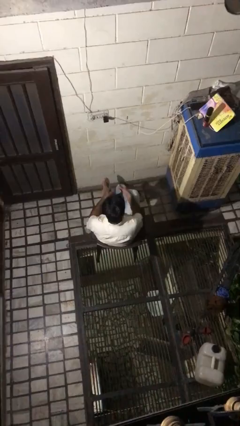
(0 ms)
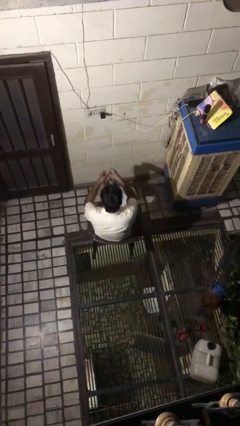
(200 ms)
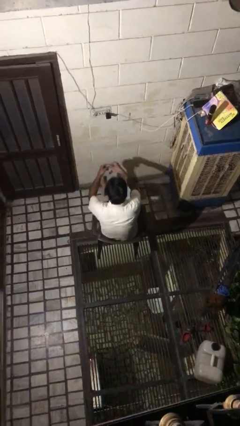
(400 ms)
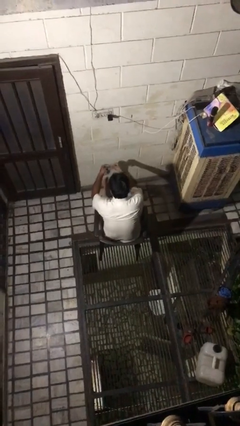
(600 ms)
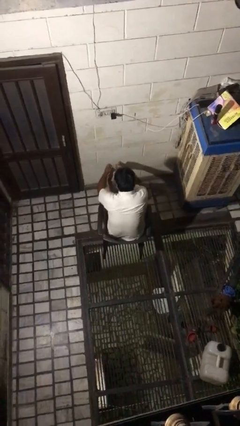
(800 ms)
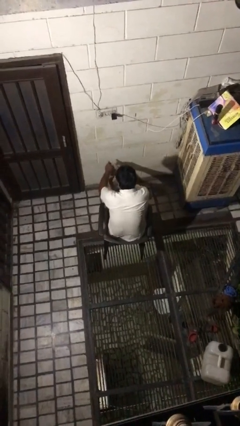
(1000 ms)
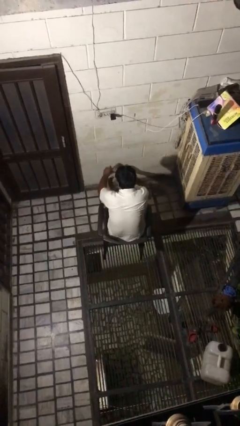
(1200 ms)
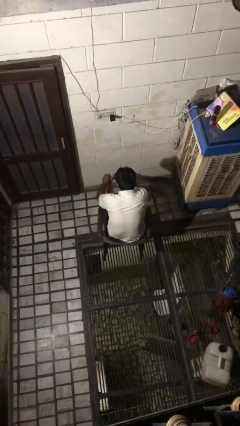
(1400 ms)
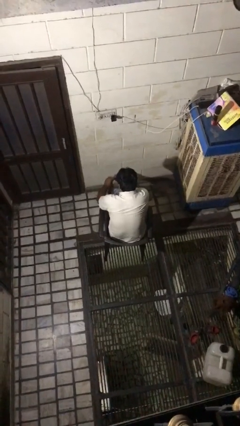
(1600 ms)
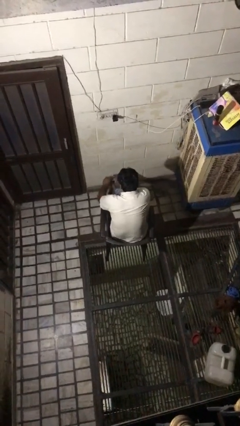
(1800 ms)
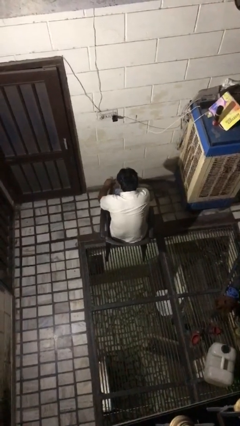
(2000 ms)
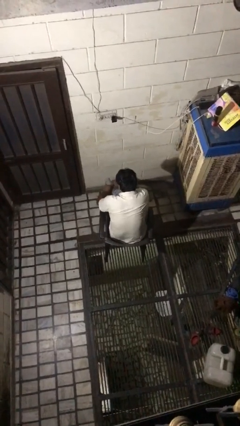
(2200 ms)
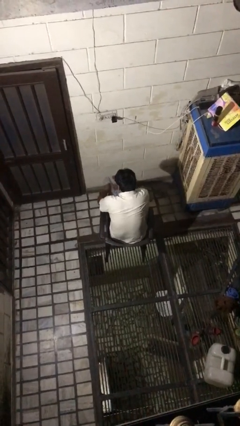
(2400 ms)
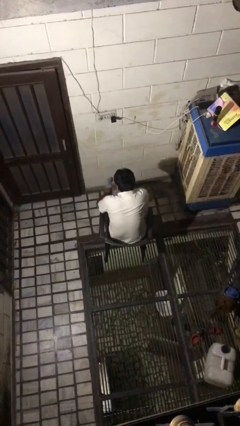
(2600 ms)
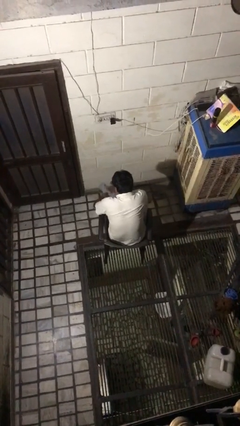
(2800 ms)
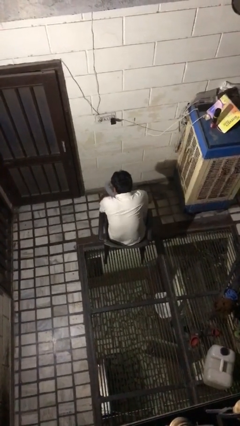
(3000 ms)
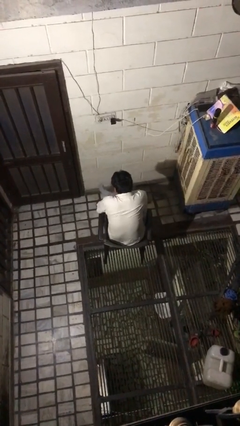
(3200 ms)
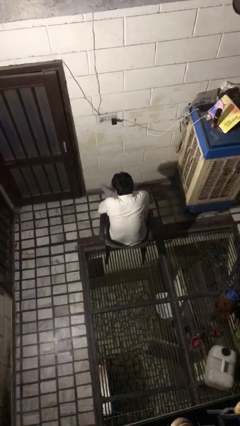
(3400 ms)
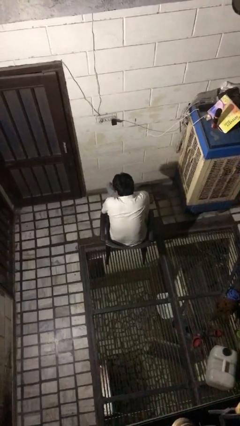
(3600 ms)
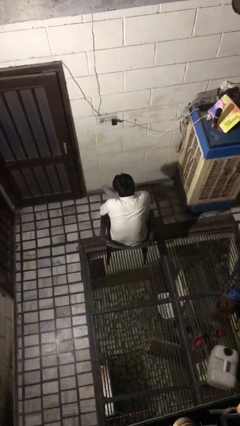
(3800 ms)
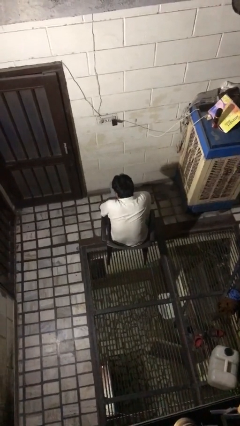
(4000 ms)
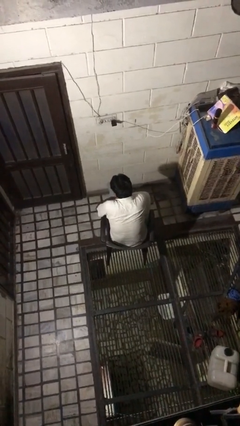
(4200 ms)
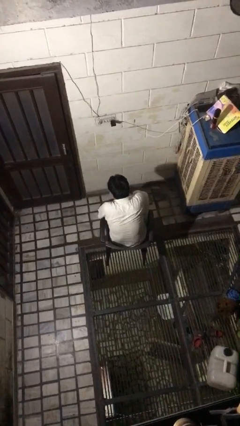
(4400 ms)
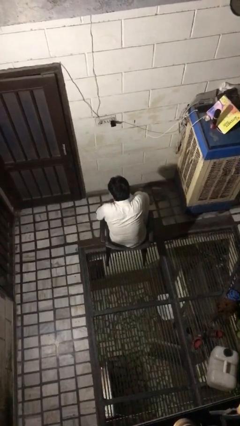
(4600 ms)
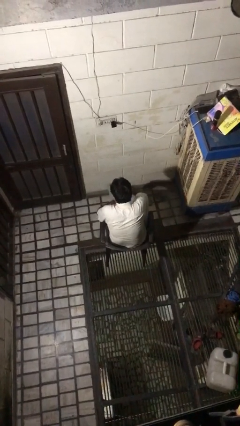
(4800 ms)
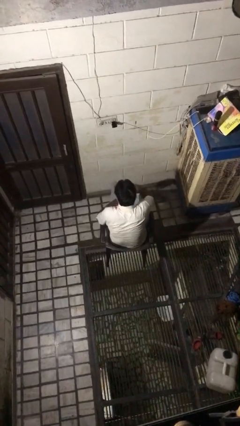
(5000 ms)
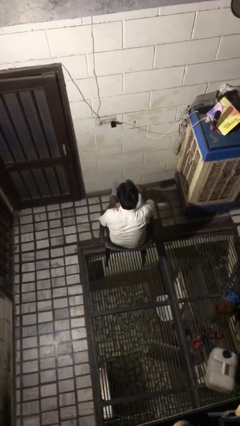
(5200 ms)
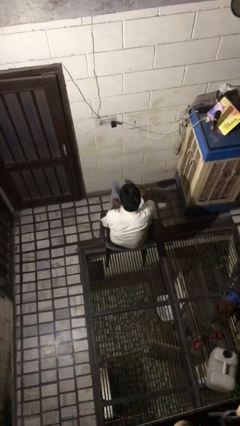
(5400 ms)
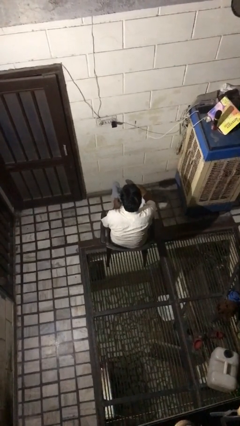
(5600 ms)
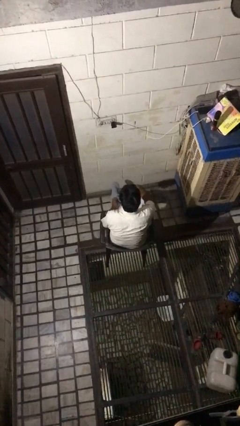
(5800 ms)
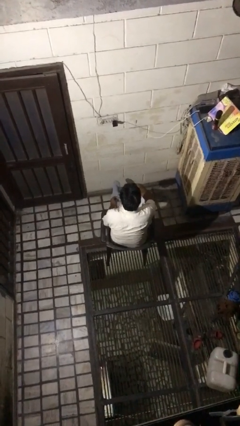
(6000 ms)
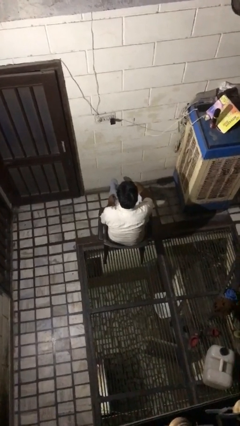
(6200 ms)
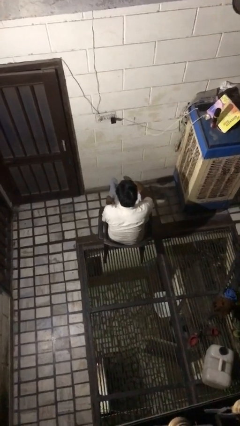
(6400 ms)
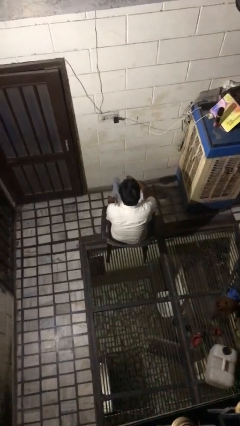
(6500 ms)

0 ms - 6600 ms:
person puts on socks

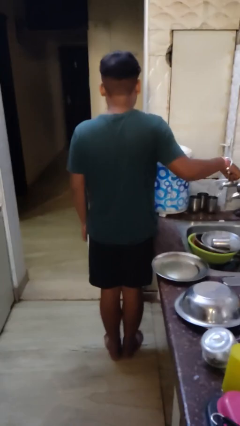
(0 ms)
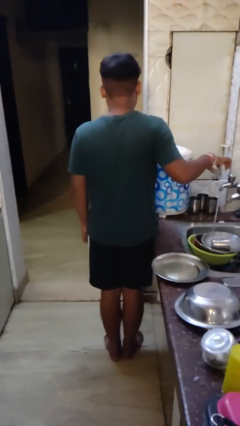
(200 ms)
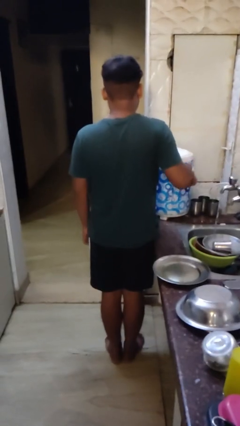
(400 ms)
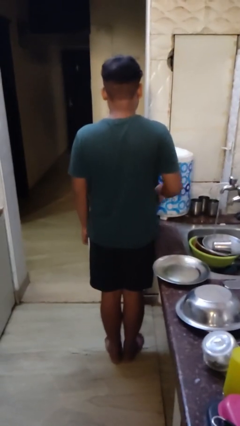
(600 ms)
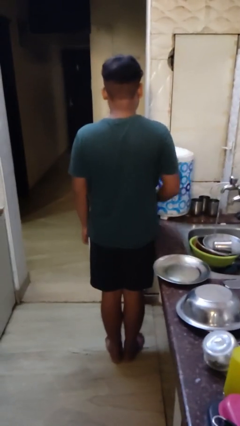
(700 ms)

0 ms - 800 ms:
person turns on faucet

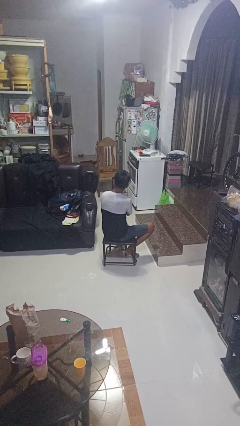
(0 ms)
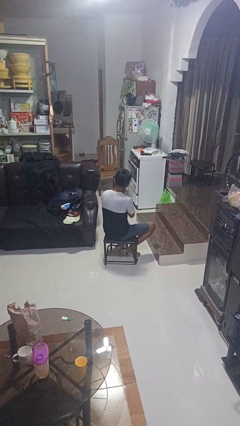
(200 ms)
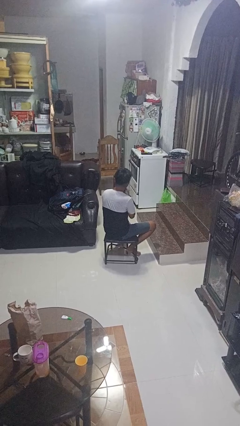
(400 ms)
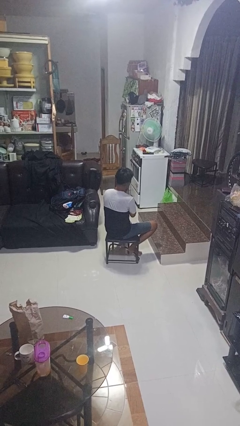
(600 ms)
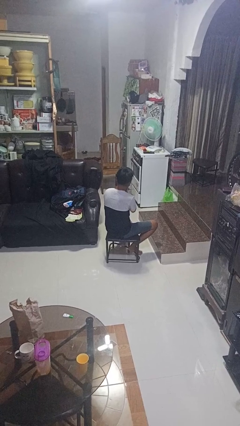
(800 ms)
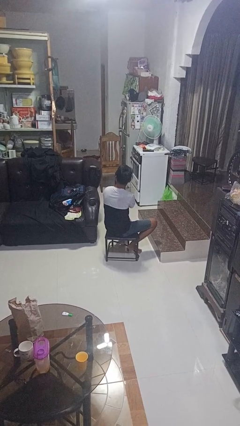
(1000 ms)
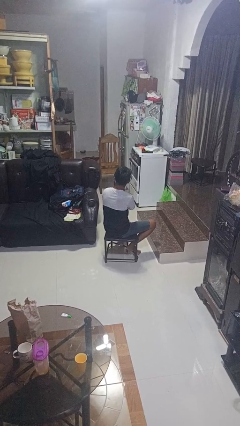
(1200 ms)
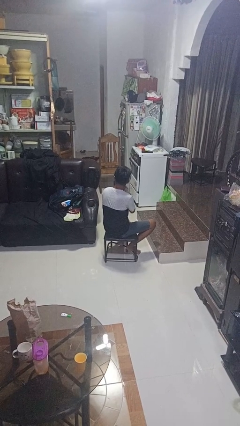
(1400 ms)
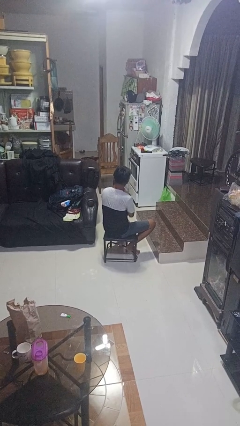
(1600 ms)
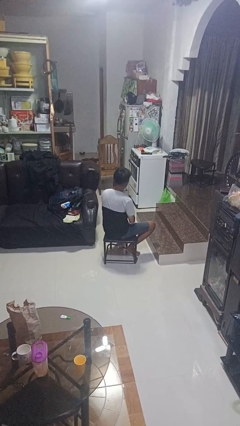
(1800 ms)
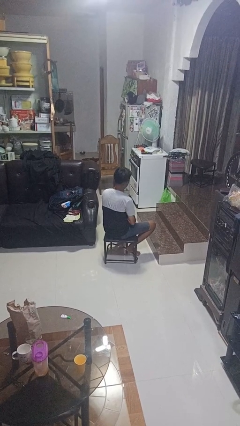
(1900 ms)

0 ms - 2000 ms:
person strokes chin

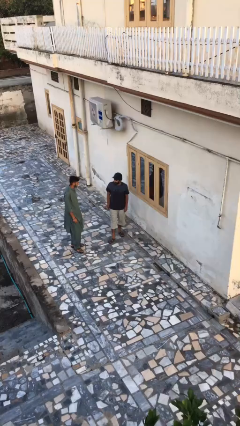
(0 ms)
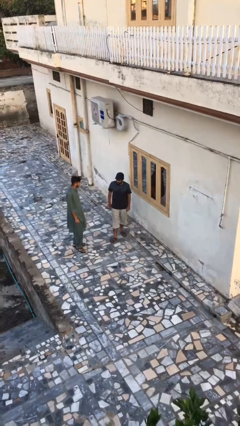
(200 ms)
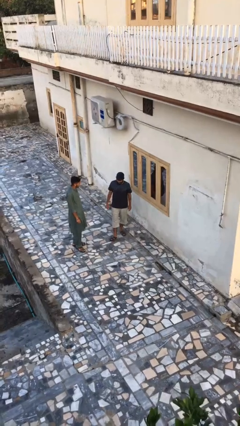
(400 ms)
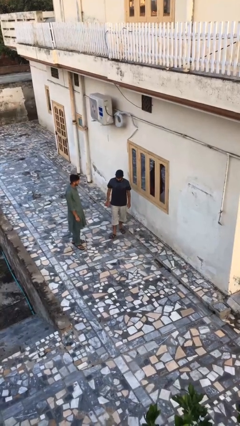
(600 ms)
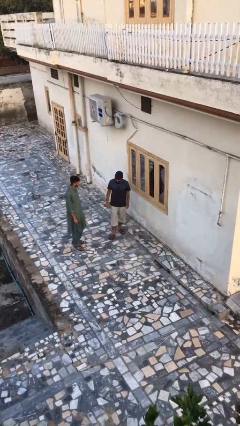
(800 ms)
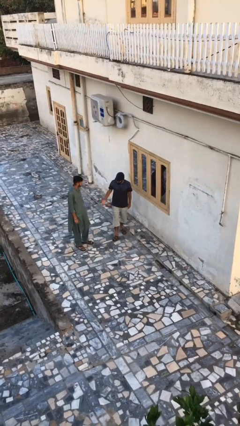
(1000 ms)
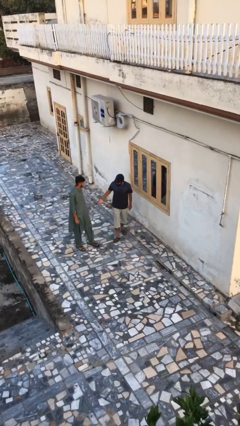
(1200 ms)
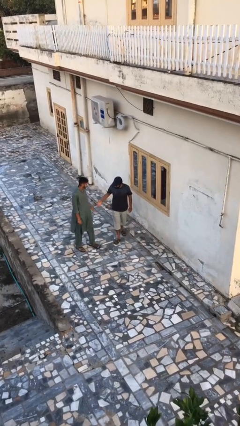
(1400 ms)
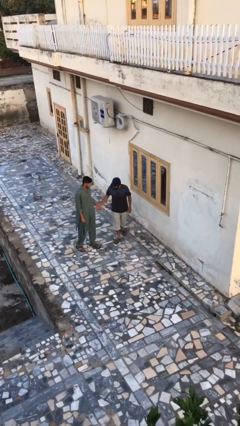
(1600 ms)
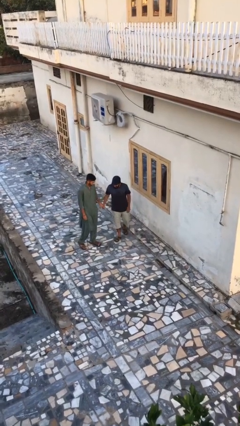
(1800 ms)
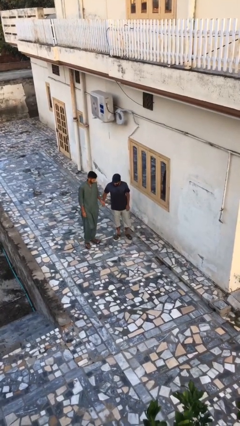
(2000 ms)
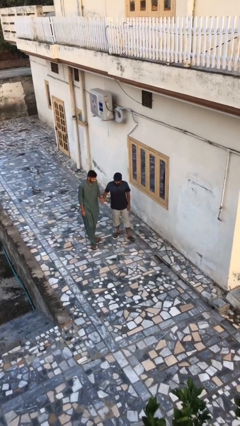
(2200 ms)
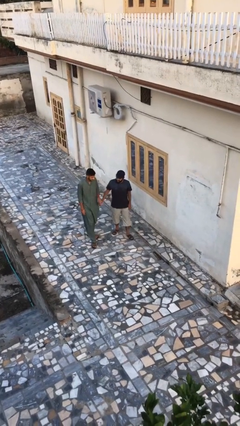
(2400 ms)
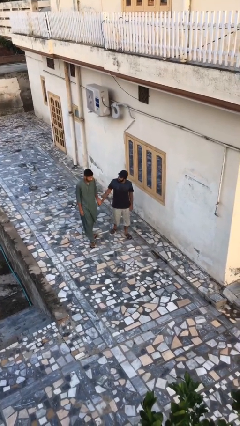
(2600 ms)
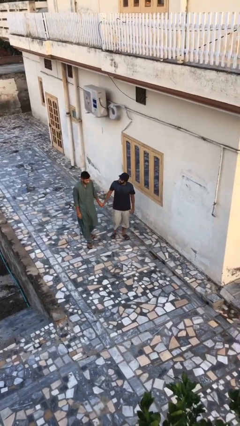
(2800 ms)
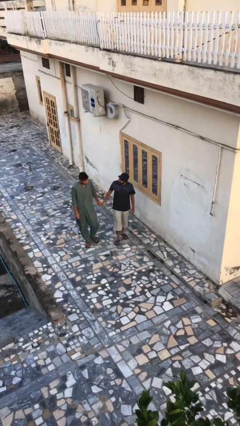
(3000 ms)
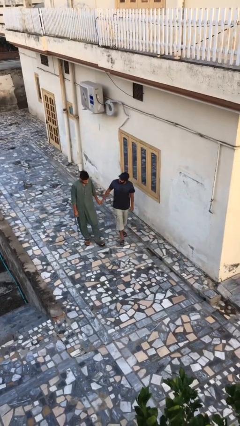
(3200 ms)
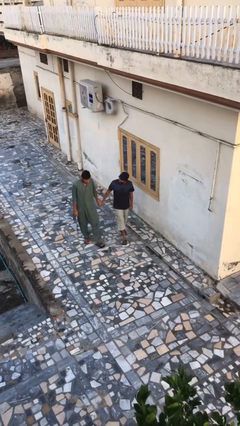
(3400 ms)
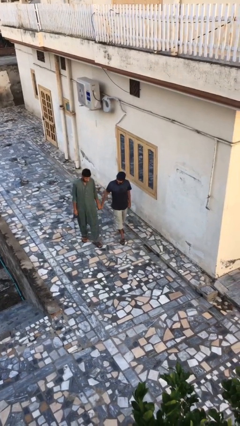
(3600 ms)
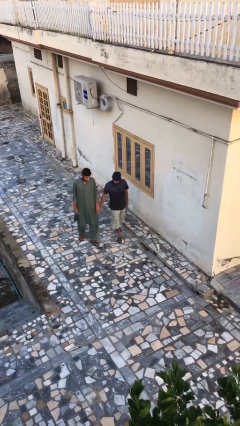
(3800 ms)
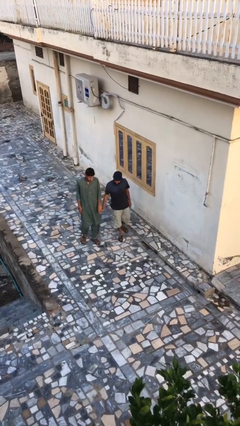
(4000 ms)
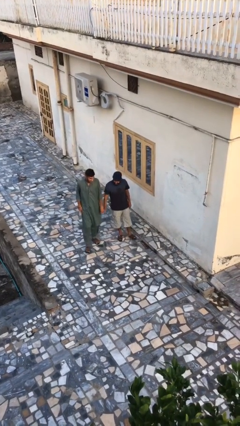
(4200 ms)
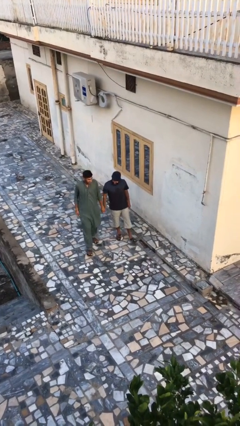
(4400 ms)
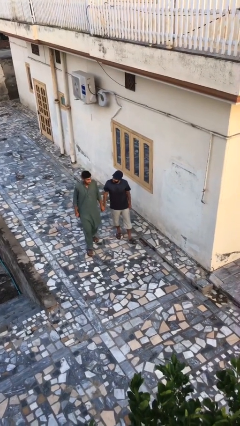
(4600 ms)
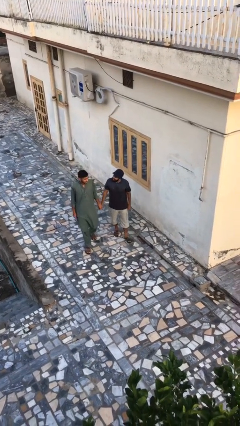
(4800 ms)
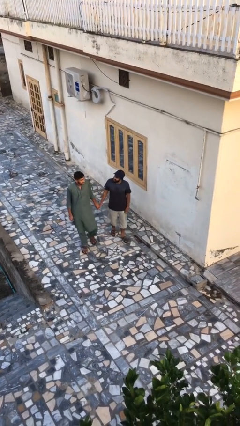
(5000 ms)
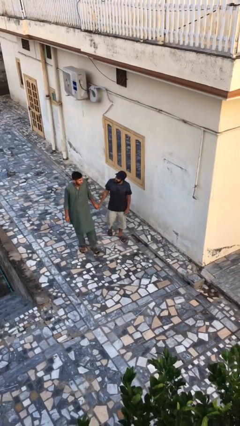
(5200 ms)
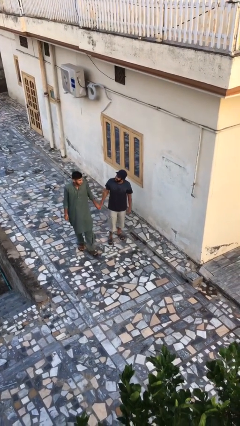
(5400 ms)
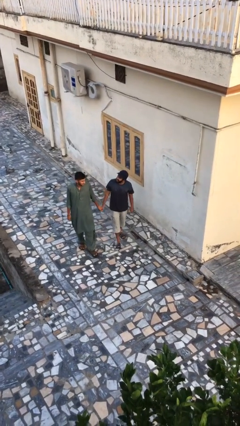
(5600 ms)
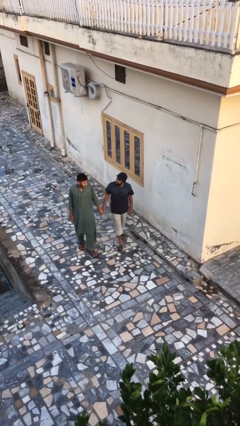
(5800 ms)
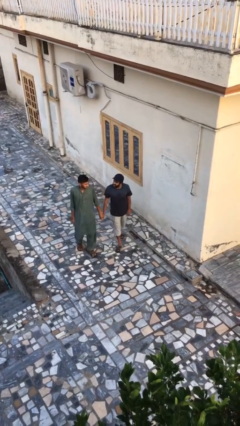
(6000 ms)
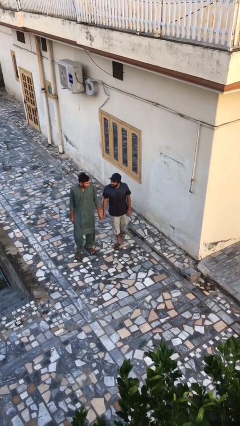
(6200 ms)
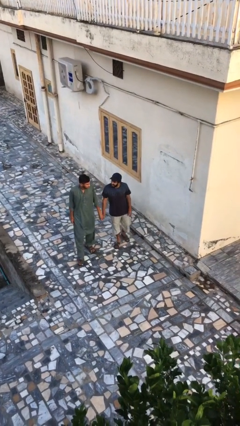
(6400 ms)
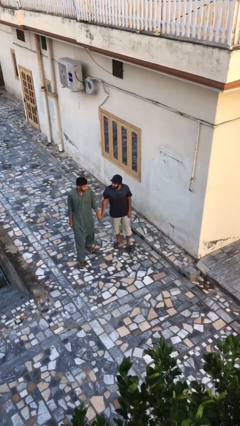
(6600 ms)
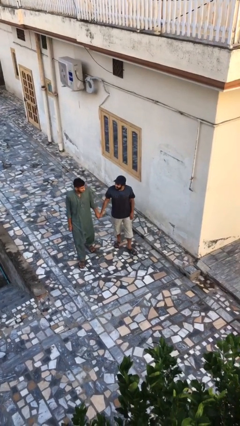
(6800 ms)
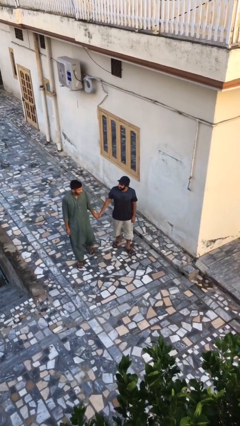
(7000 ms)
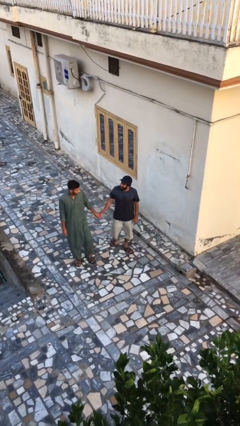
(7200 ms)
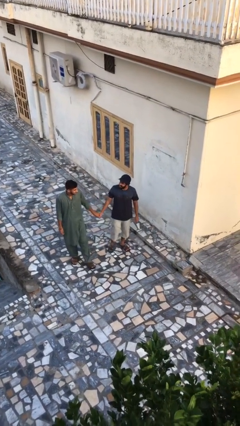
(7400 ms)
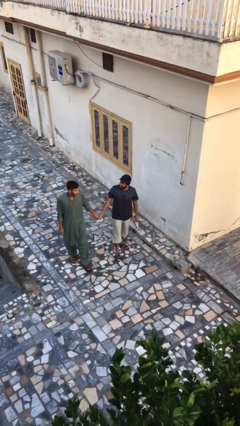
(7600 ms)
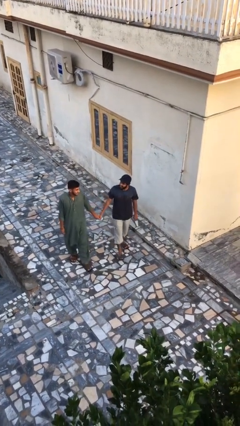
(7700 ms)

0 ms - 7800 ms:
person holds hand

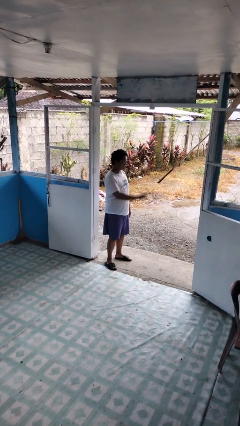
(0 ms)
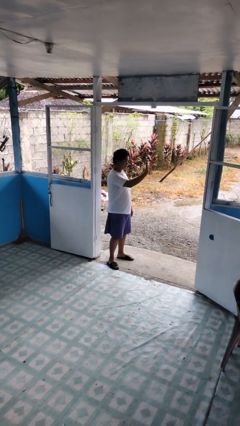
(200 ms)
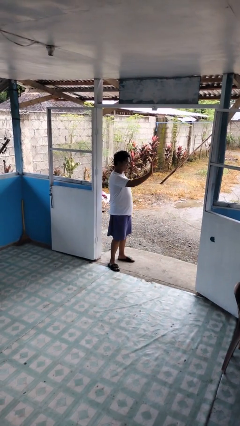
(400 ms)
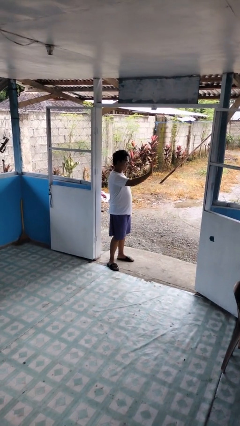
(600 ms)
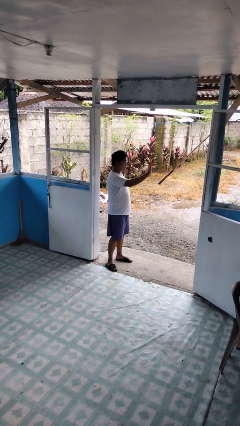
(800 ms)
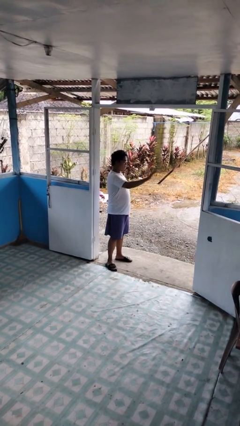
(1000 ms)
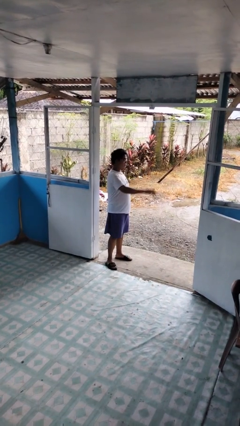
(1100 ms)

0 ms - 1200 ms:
person gestures stop
